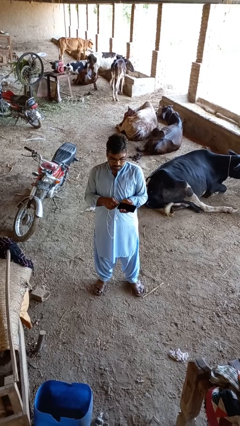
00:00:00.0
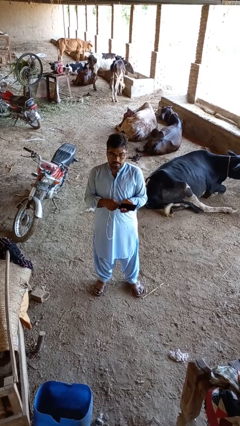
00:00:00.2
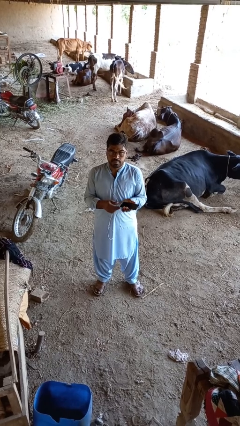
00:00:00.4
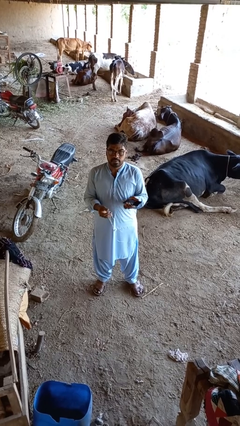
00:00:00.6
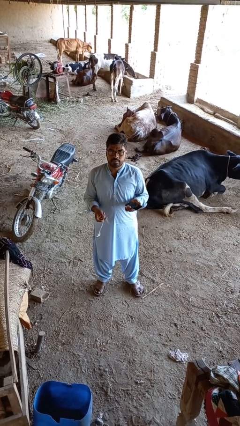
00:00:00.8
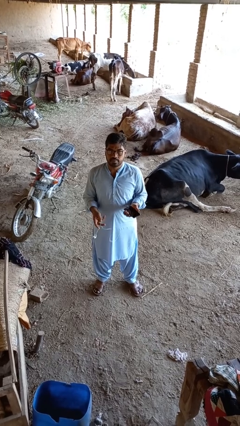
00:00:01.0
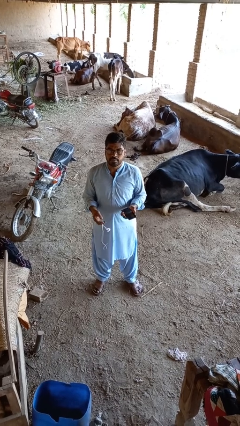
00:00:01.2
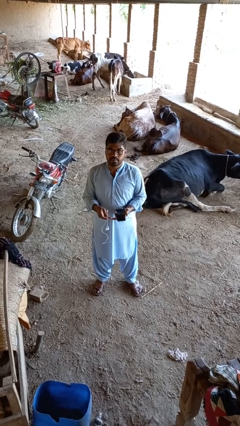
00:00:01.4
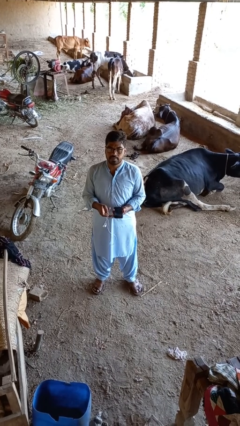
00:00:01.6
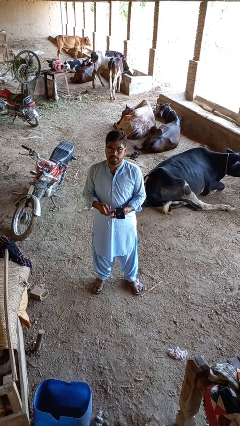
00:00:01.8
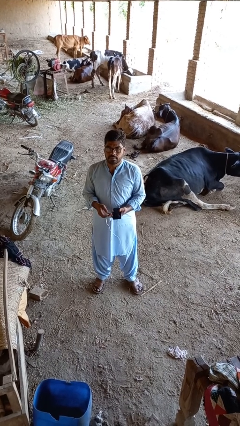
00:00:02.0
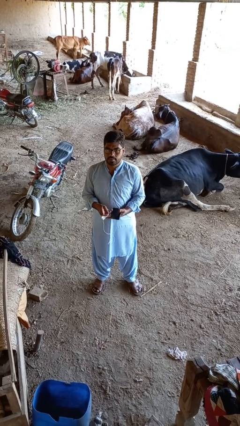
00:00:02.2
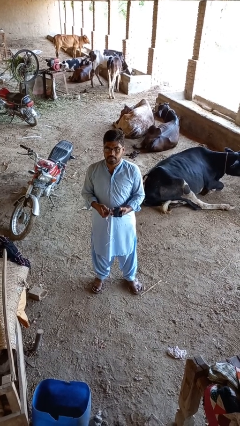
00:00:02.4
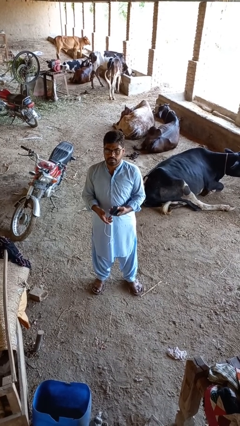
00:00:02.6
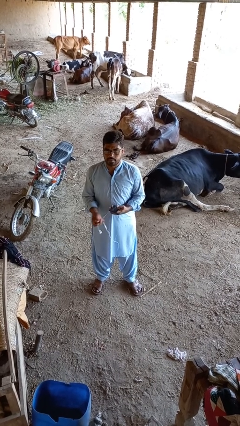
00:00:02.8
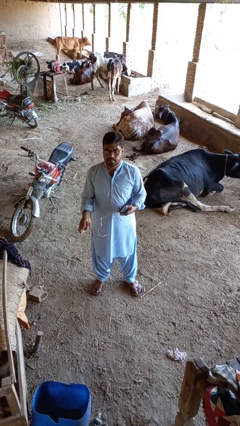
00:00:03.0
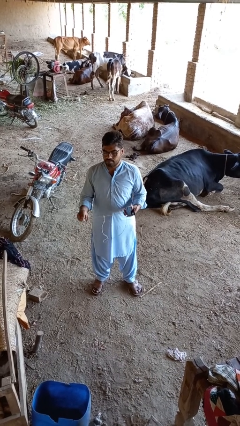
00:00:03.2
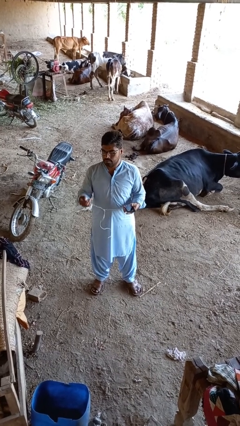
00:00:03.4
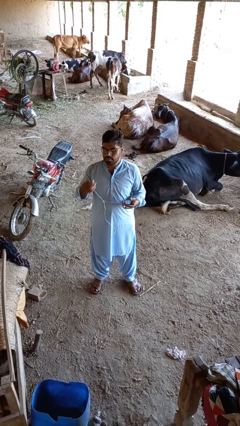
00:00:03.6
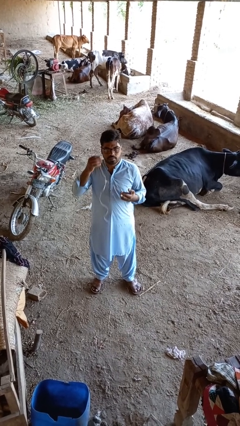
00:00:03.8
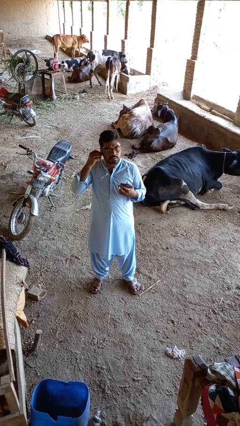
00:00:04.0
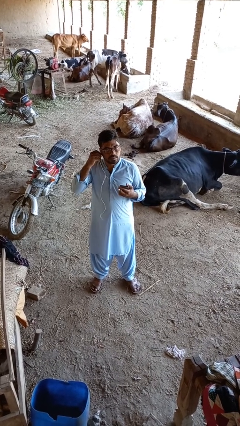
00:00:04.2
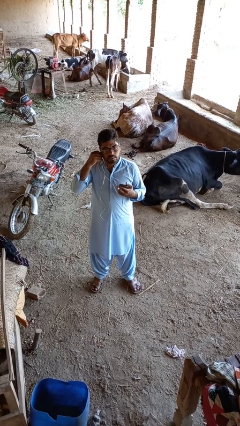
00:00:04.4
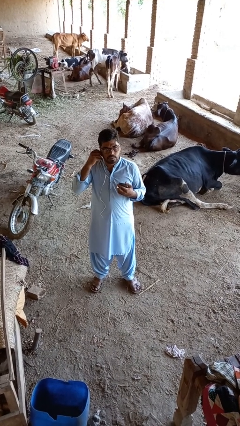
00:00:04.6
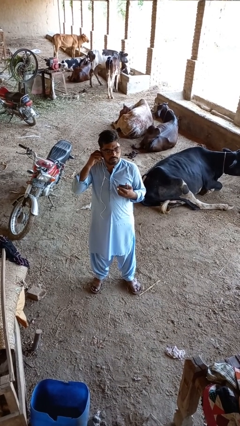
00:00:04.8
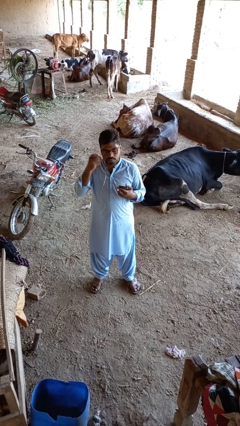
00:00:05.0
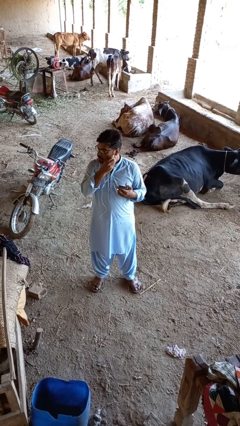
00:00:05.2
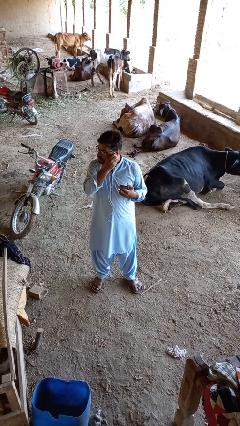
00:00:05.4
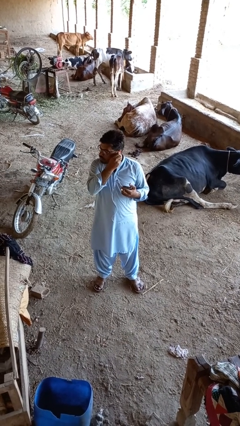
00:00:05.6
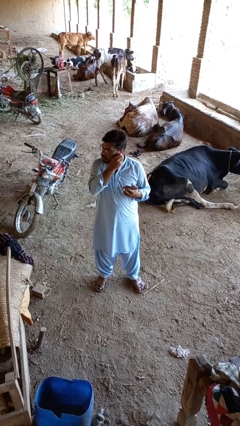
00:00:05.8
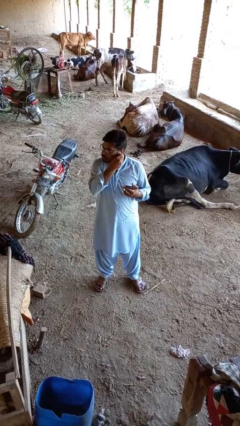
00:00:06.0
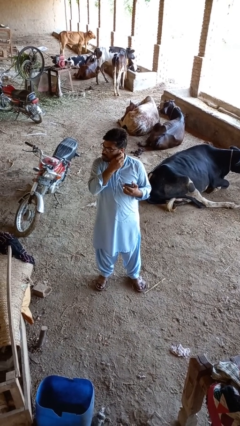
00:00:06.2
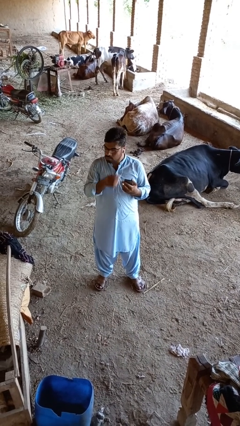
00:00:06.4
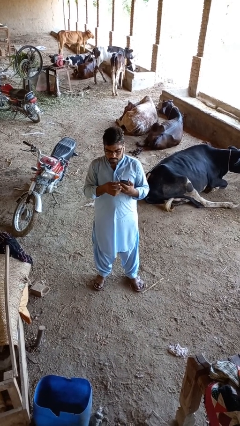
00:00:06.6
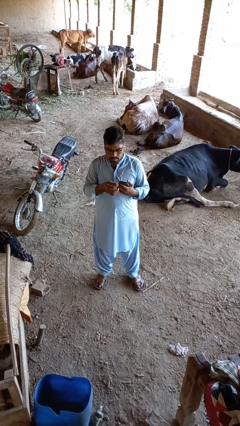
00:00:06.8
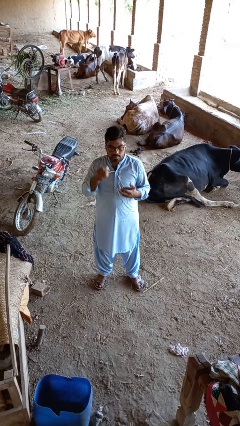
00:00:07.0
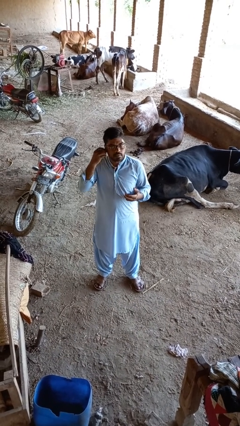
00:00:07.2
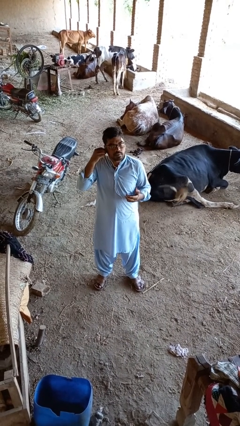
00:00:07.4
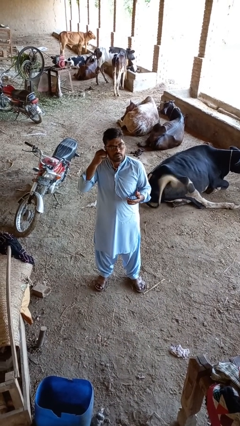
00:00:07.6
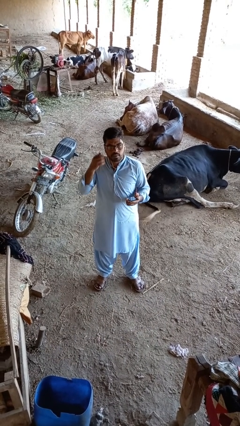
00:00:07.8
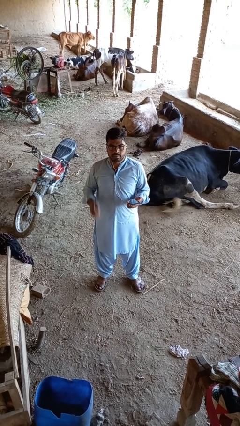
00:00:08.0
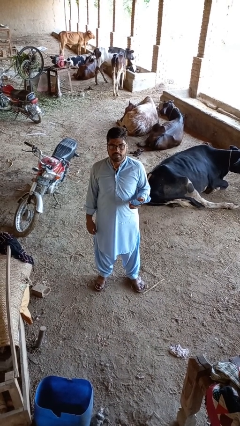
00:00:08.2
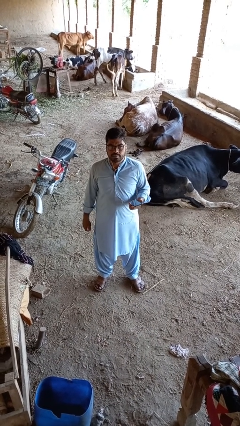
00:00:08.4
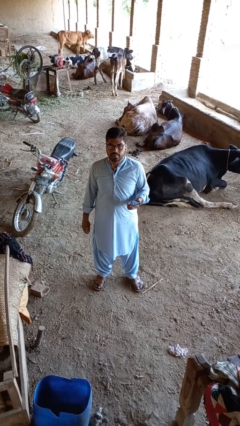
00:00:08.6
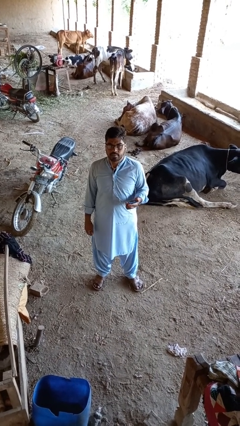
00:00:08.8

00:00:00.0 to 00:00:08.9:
person puts on headphones

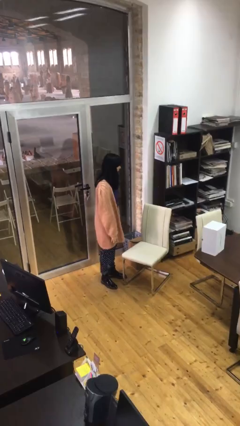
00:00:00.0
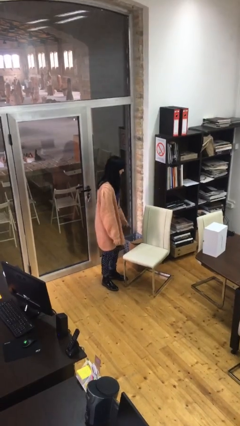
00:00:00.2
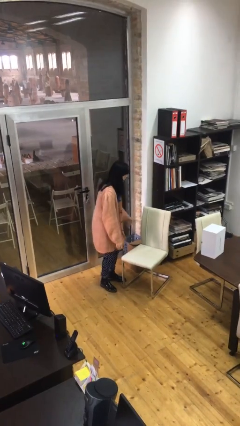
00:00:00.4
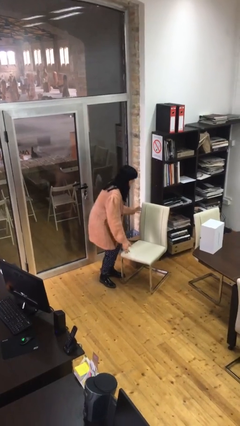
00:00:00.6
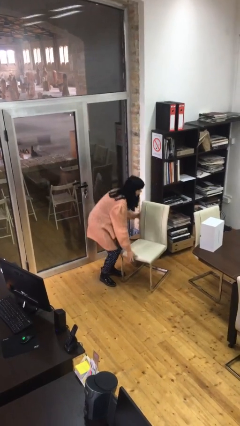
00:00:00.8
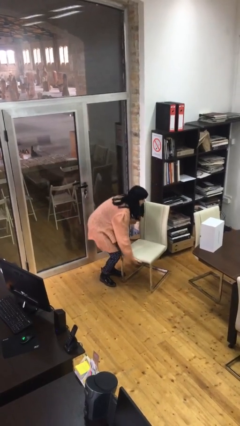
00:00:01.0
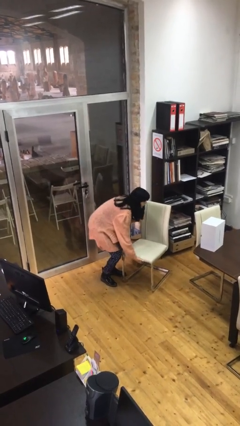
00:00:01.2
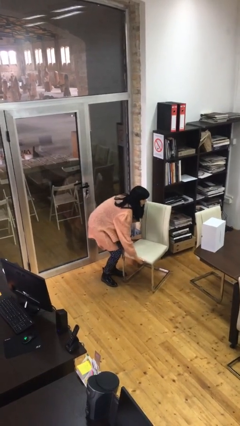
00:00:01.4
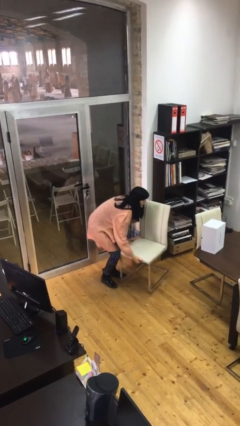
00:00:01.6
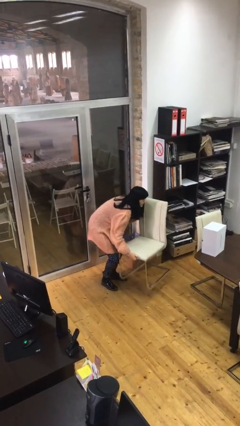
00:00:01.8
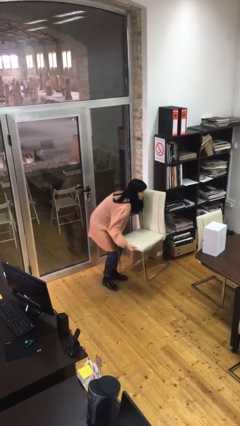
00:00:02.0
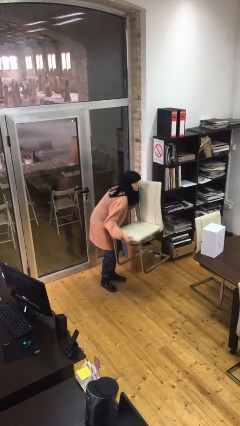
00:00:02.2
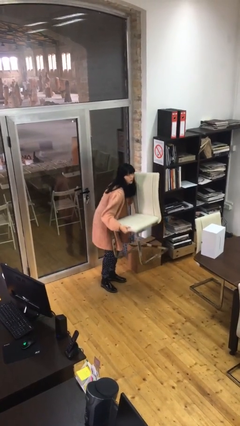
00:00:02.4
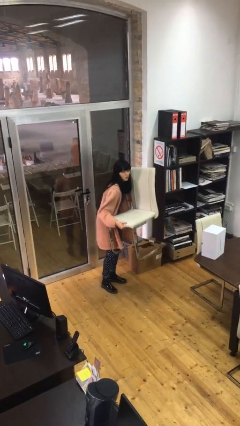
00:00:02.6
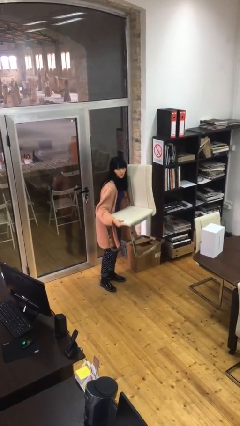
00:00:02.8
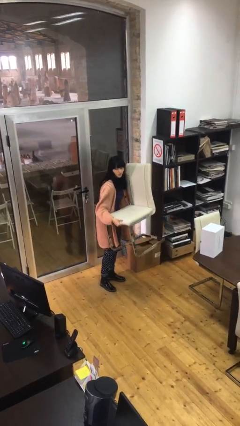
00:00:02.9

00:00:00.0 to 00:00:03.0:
person picks up object from floor

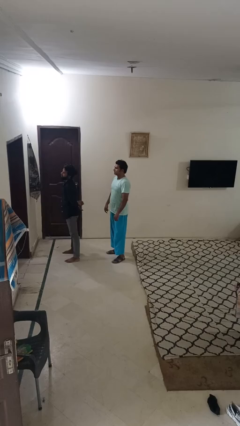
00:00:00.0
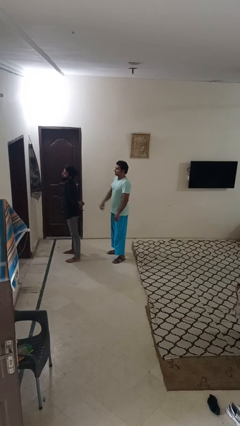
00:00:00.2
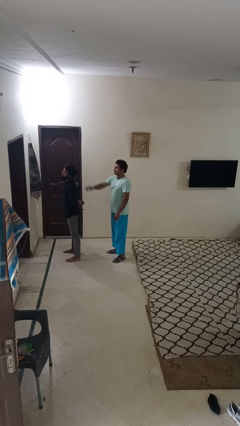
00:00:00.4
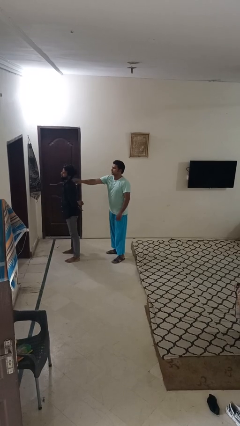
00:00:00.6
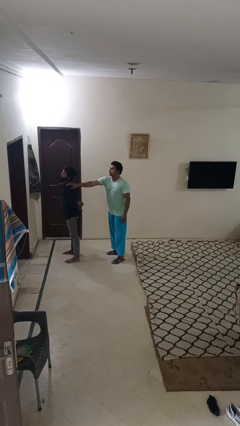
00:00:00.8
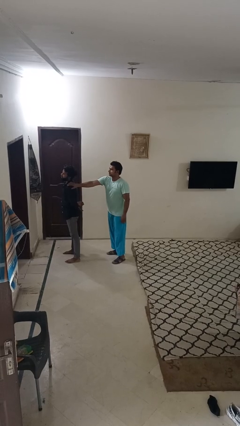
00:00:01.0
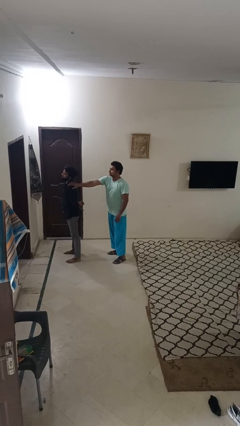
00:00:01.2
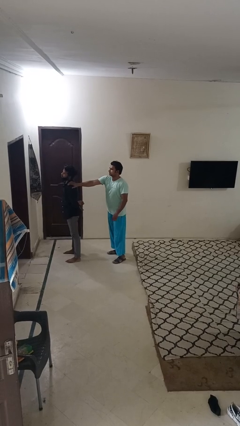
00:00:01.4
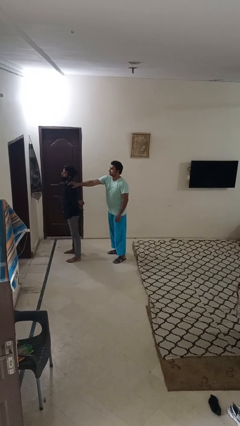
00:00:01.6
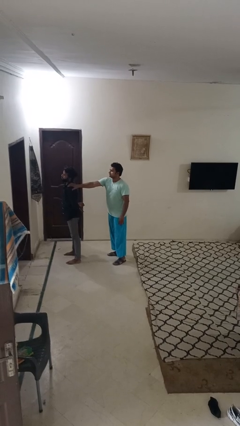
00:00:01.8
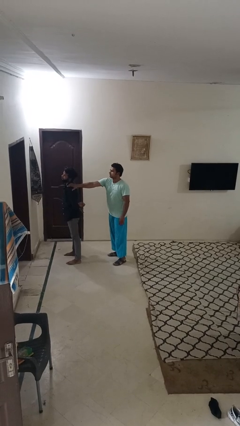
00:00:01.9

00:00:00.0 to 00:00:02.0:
person grabs person by shoulder

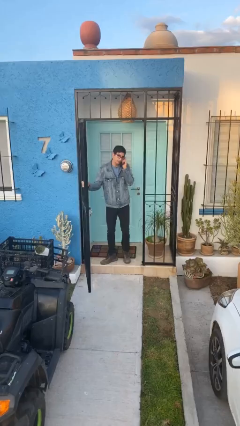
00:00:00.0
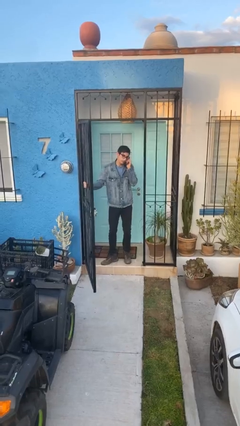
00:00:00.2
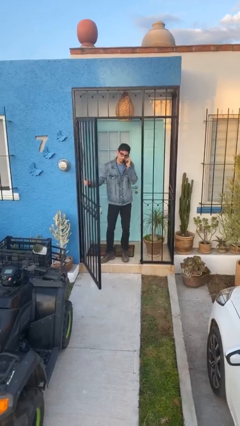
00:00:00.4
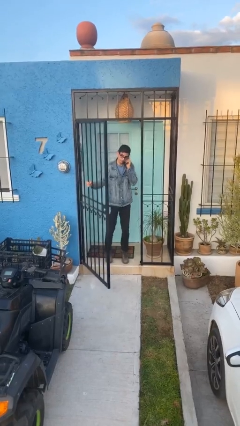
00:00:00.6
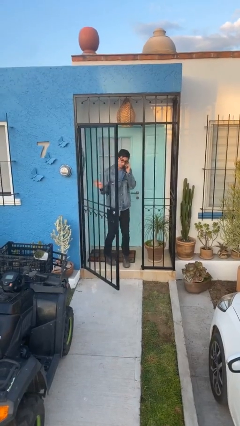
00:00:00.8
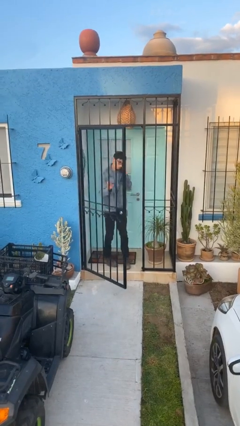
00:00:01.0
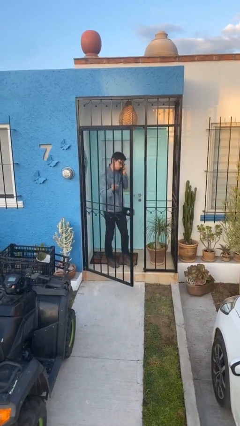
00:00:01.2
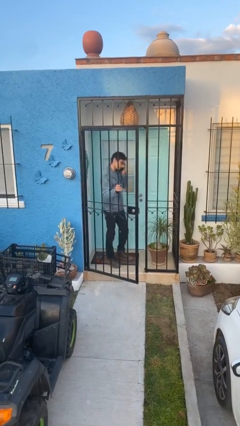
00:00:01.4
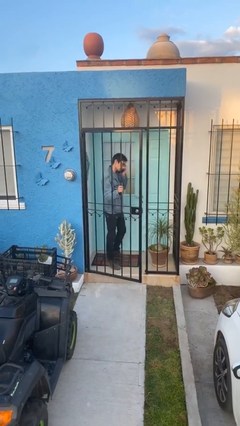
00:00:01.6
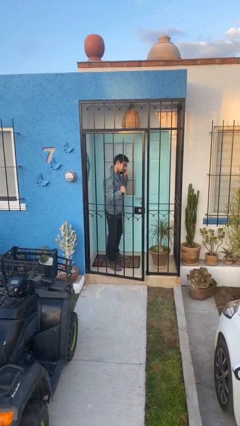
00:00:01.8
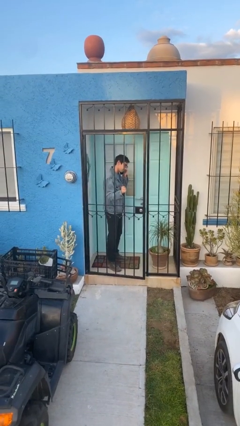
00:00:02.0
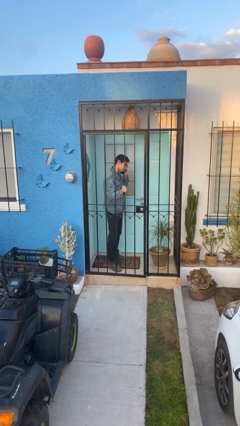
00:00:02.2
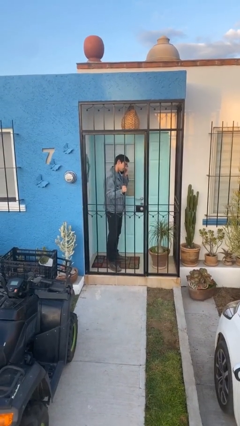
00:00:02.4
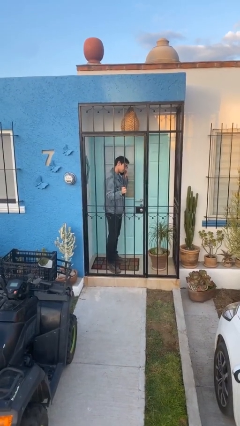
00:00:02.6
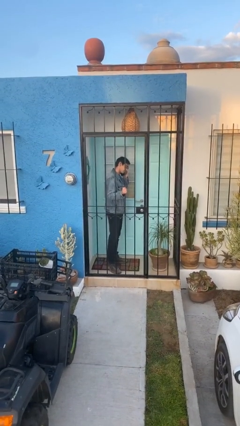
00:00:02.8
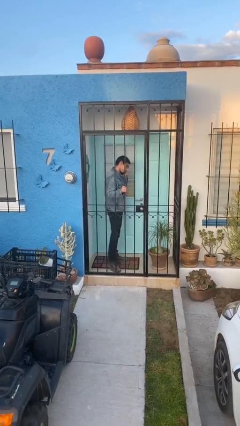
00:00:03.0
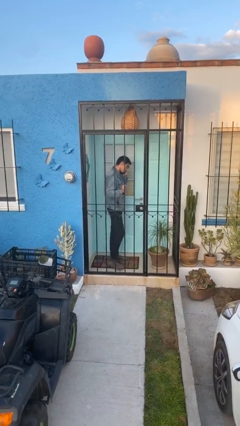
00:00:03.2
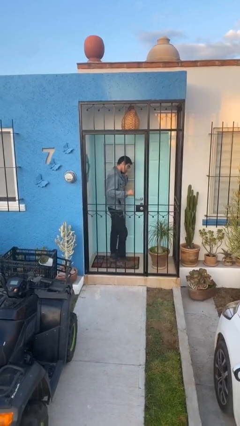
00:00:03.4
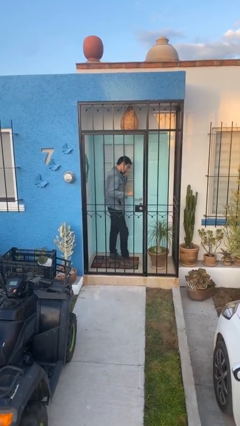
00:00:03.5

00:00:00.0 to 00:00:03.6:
person closes facility door

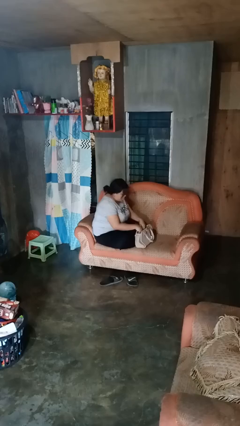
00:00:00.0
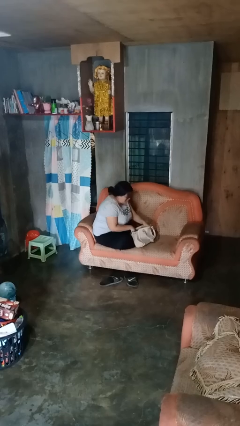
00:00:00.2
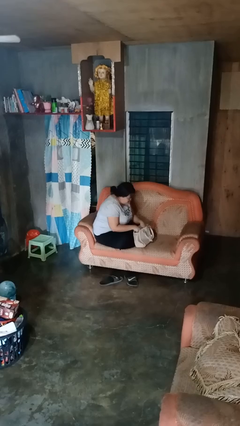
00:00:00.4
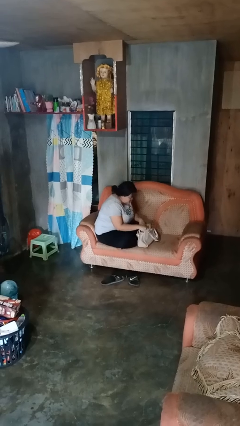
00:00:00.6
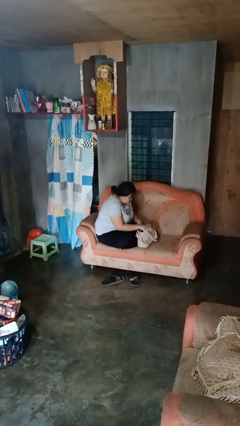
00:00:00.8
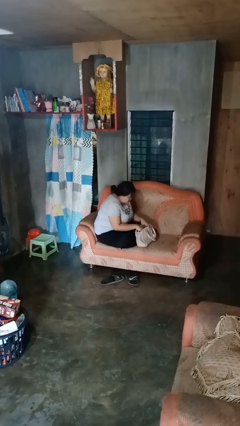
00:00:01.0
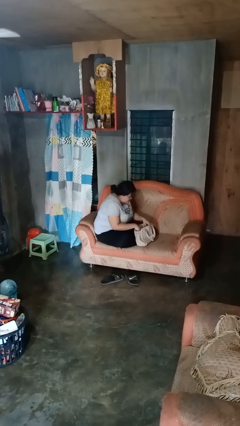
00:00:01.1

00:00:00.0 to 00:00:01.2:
person searches in purse
